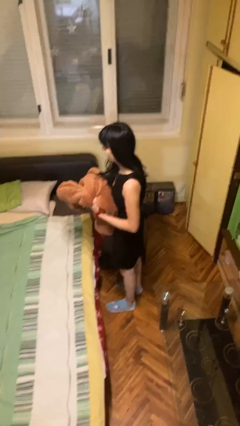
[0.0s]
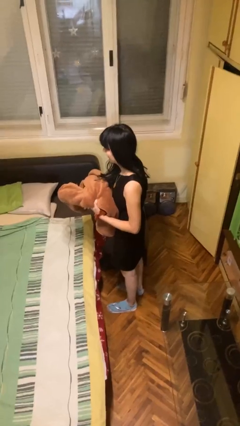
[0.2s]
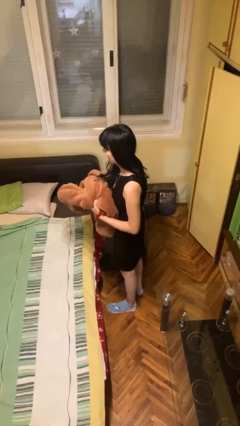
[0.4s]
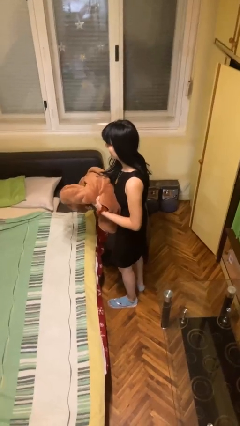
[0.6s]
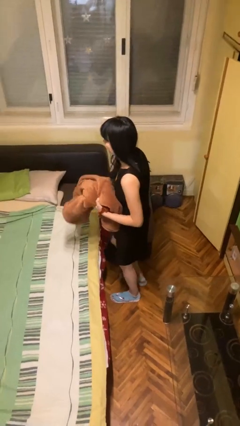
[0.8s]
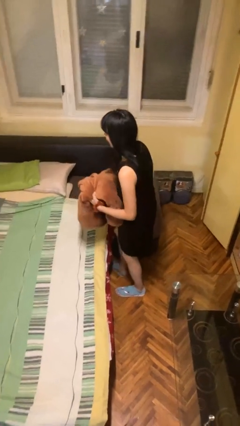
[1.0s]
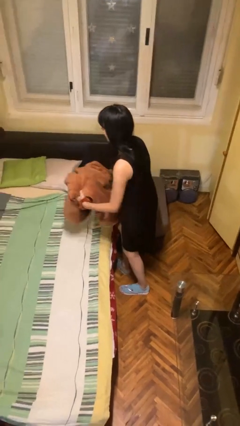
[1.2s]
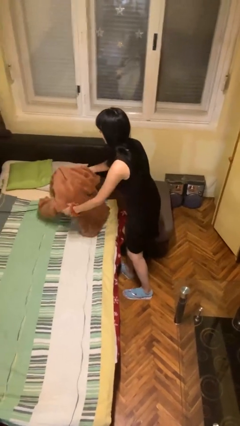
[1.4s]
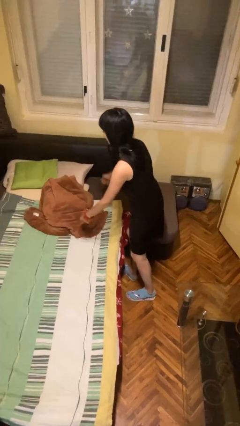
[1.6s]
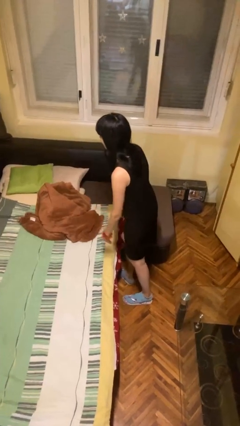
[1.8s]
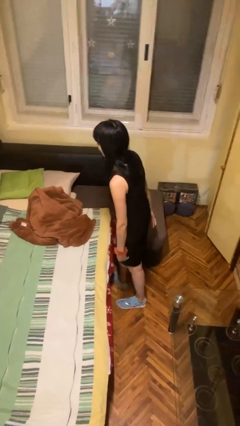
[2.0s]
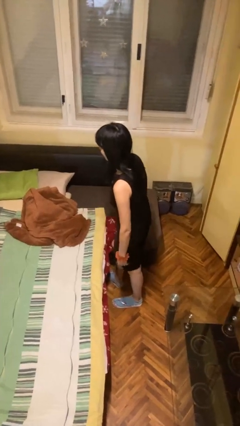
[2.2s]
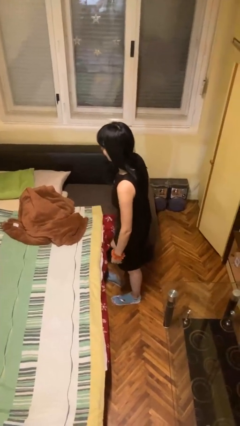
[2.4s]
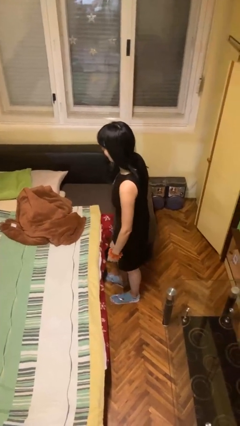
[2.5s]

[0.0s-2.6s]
person puts down object on bed

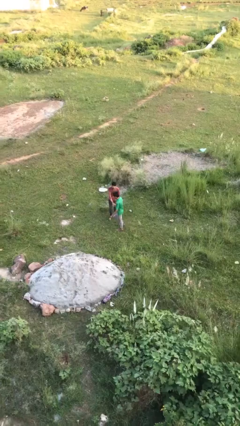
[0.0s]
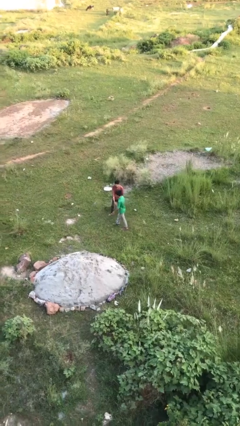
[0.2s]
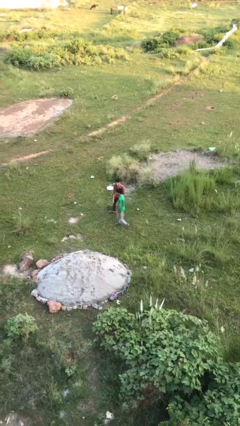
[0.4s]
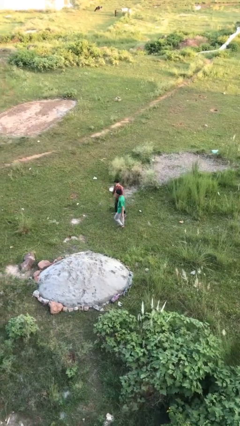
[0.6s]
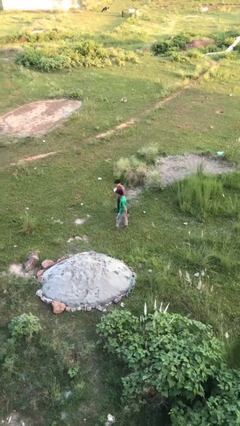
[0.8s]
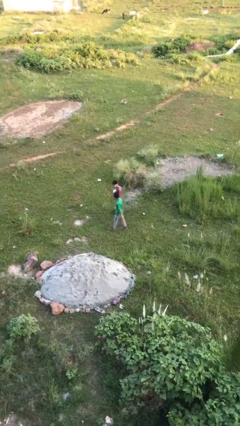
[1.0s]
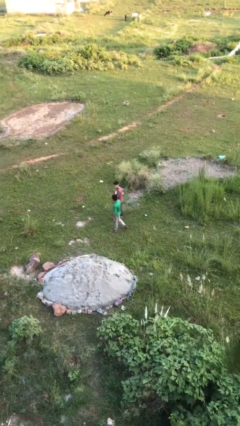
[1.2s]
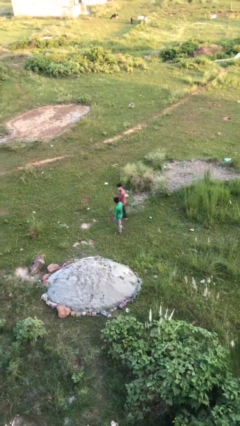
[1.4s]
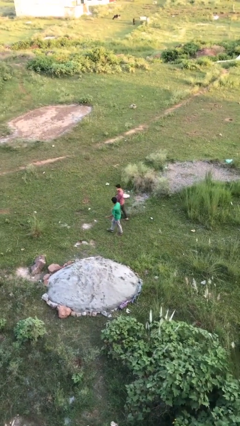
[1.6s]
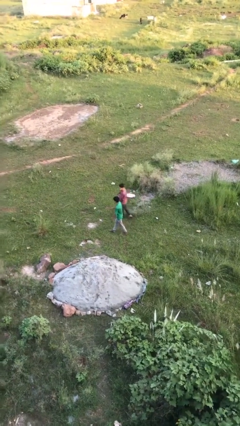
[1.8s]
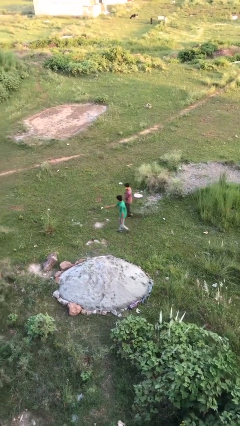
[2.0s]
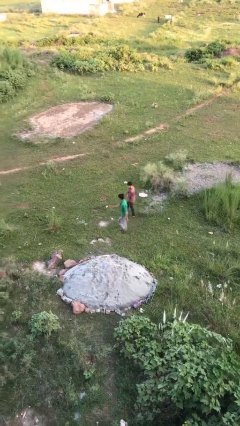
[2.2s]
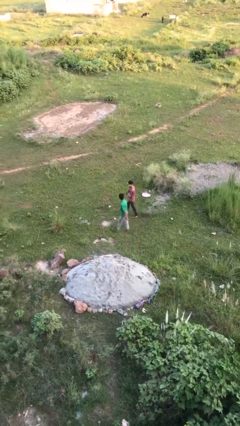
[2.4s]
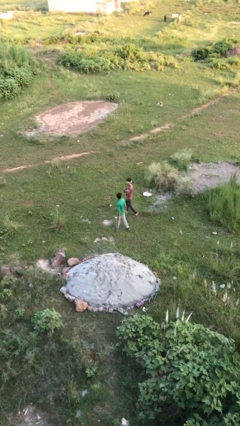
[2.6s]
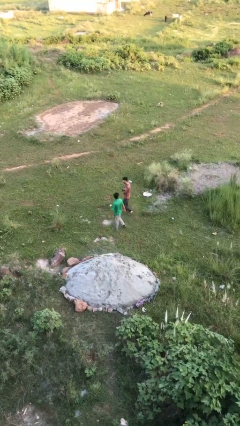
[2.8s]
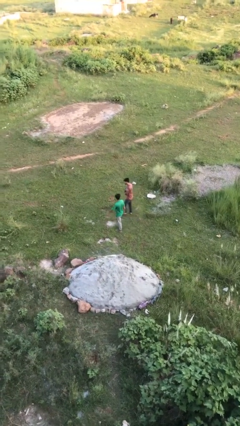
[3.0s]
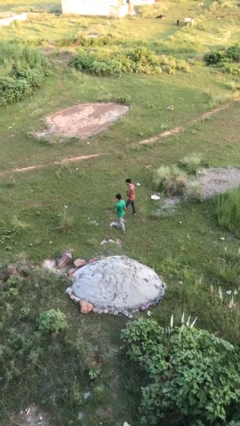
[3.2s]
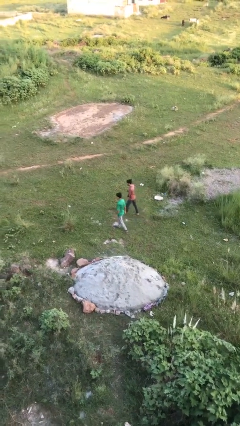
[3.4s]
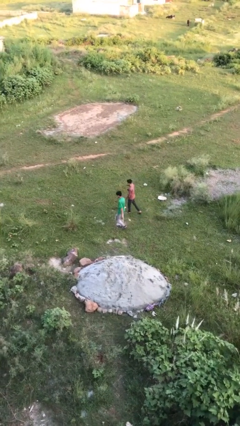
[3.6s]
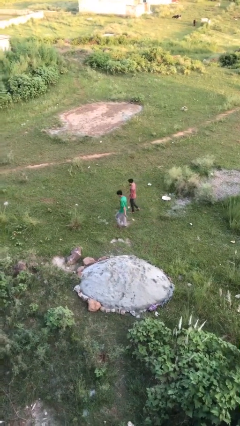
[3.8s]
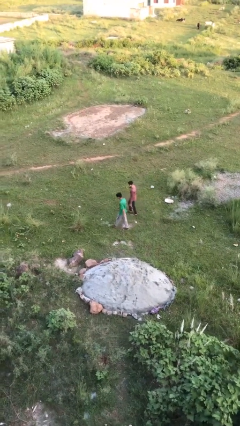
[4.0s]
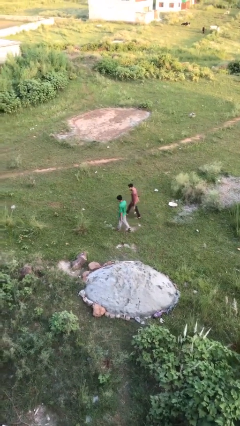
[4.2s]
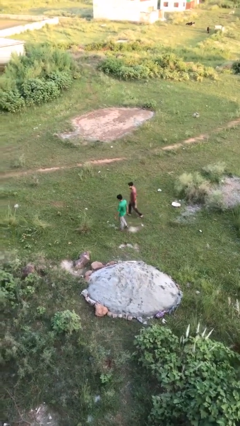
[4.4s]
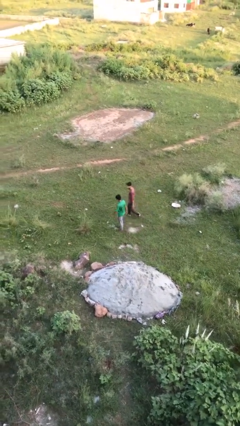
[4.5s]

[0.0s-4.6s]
person talks to person

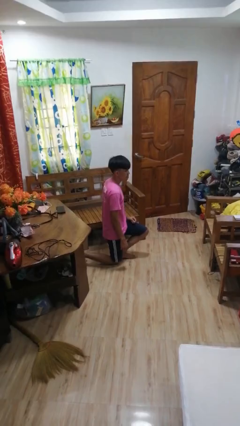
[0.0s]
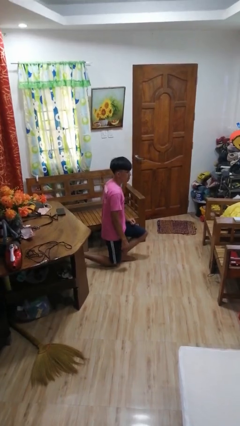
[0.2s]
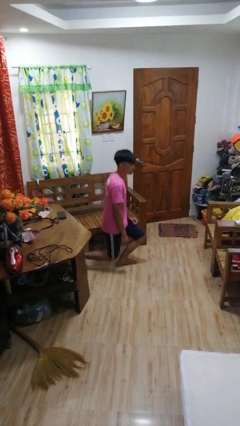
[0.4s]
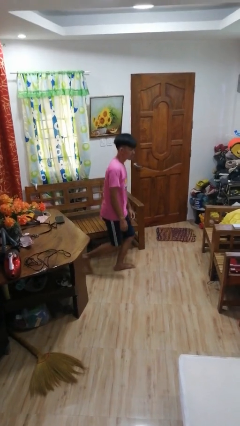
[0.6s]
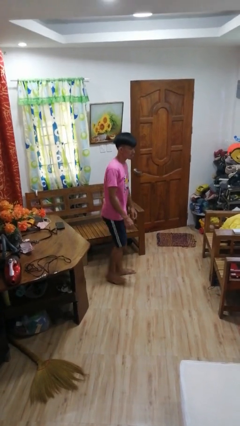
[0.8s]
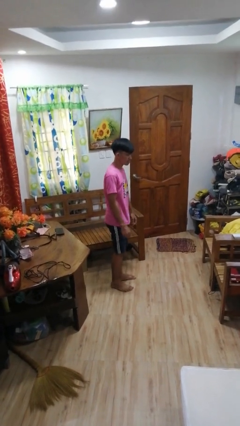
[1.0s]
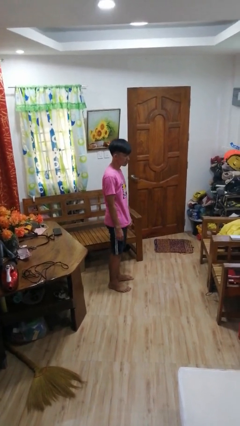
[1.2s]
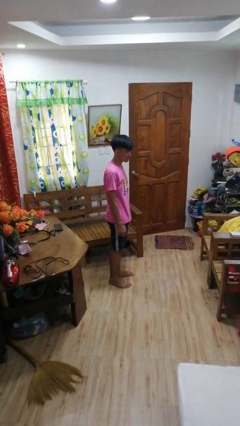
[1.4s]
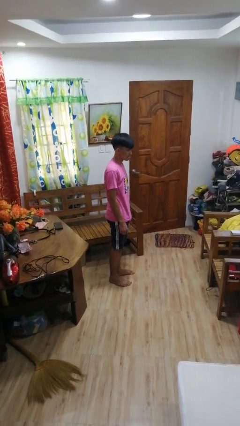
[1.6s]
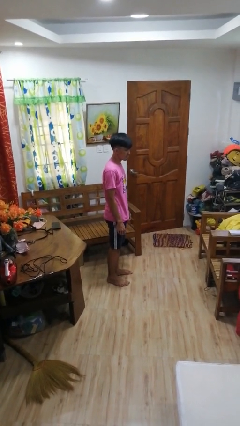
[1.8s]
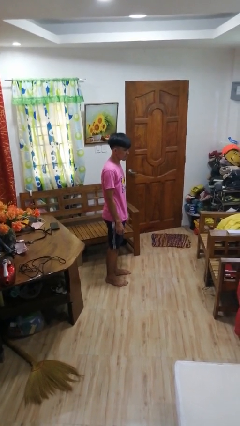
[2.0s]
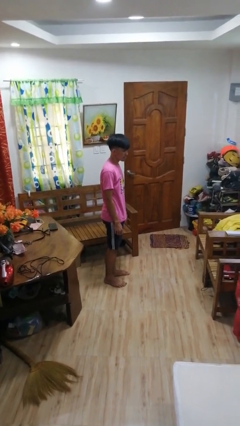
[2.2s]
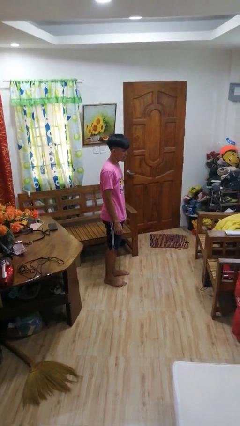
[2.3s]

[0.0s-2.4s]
person stands up from floor

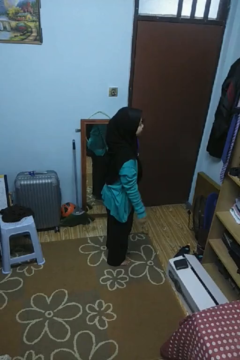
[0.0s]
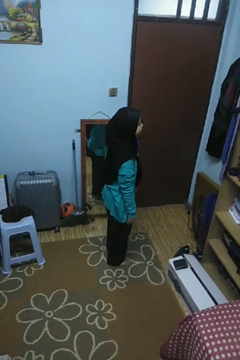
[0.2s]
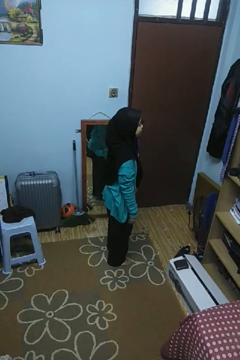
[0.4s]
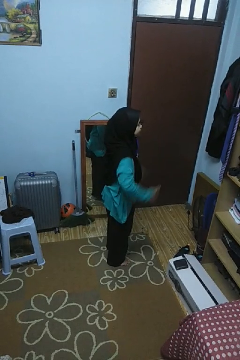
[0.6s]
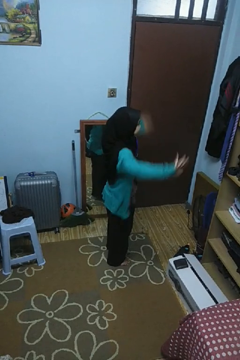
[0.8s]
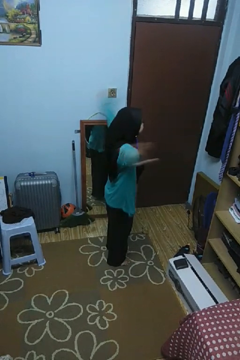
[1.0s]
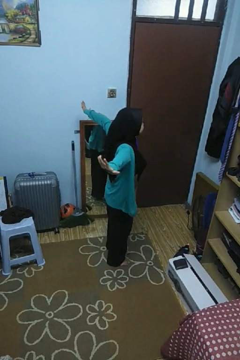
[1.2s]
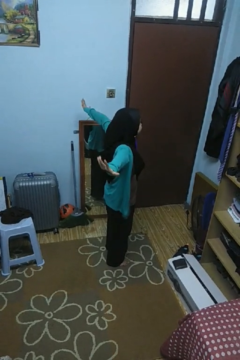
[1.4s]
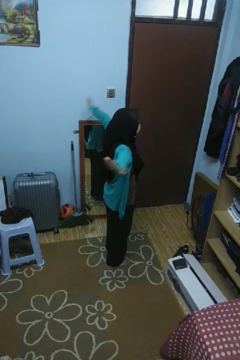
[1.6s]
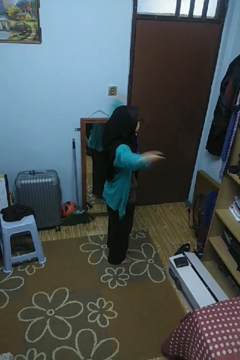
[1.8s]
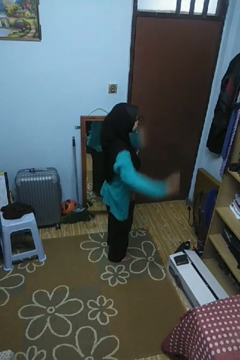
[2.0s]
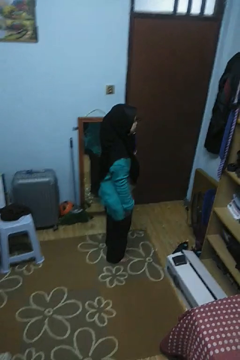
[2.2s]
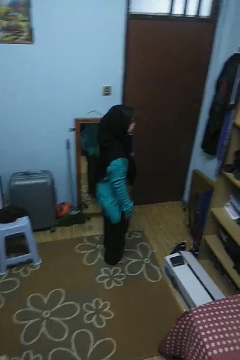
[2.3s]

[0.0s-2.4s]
person stretches arms to side

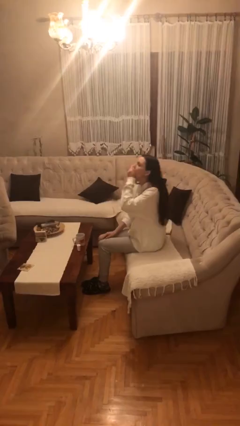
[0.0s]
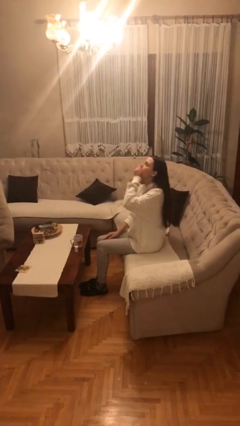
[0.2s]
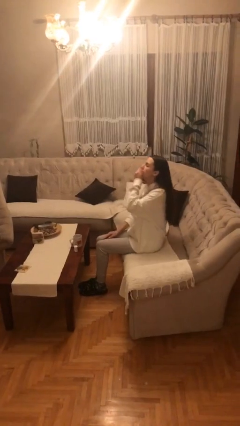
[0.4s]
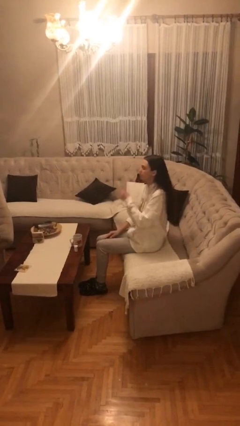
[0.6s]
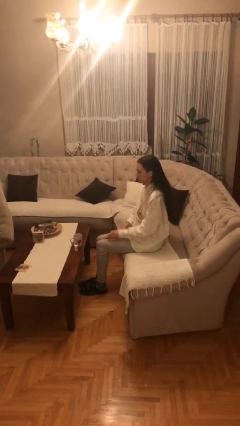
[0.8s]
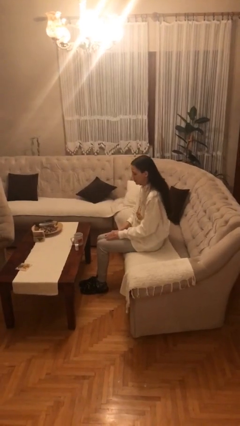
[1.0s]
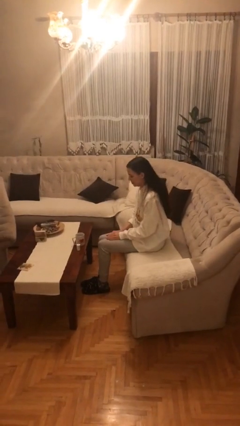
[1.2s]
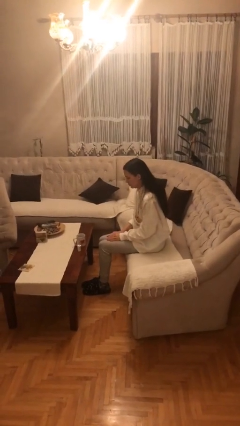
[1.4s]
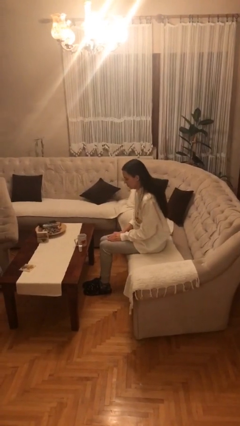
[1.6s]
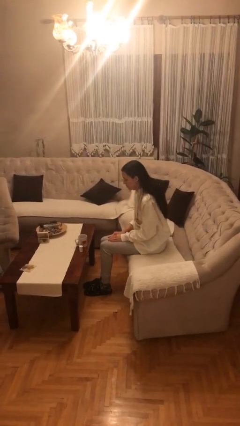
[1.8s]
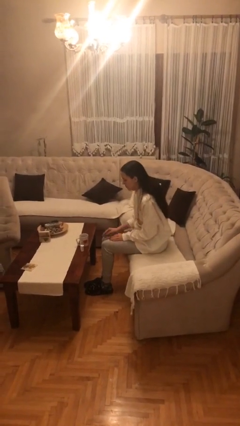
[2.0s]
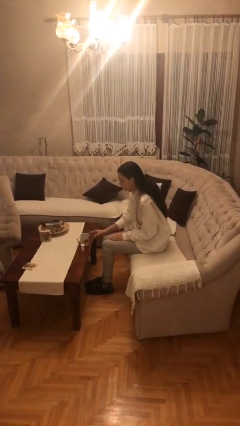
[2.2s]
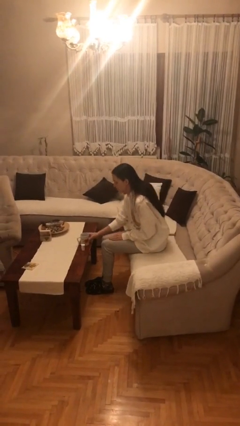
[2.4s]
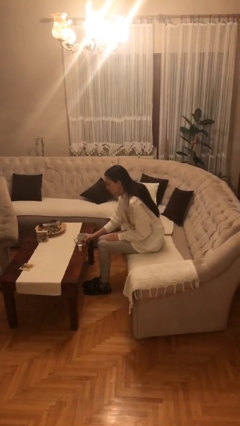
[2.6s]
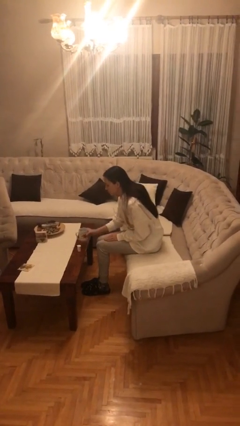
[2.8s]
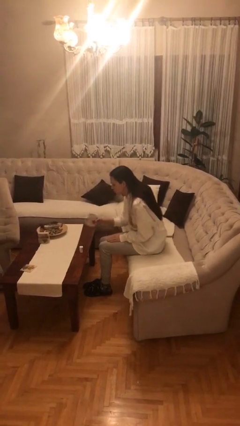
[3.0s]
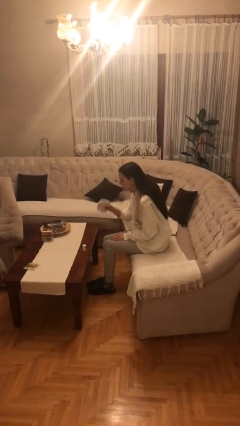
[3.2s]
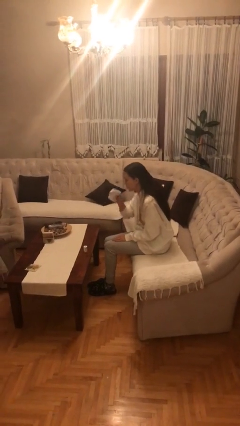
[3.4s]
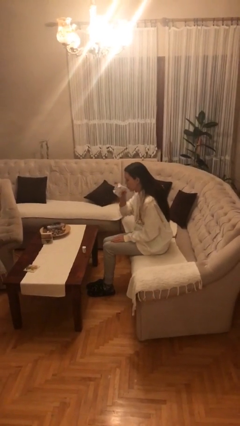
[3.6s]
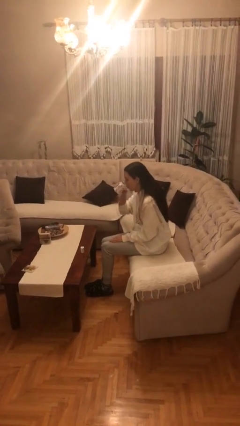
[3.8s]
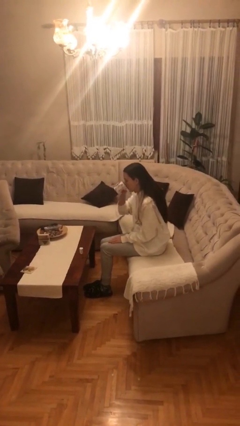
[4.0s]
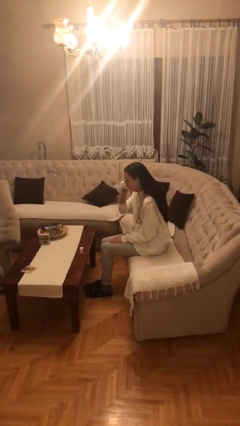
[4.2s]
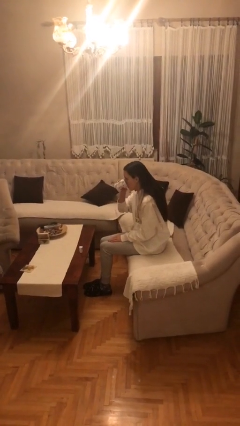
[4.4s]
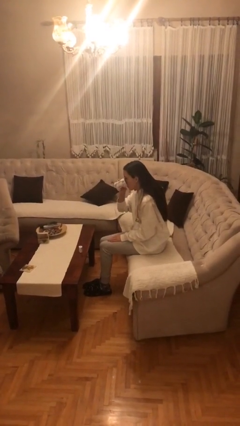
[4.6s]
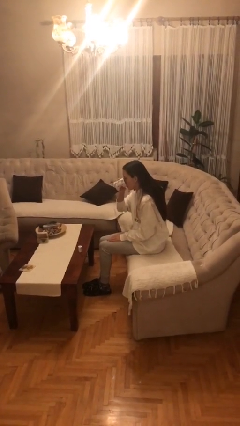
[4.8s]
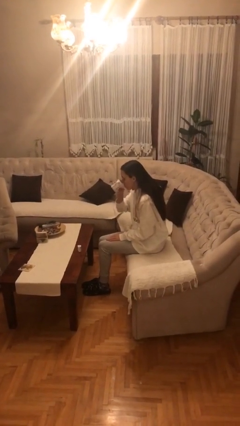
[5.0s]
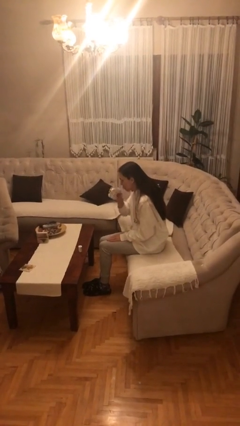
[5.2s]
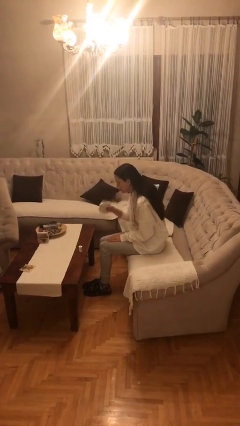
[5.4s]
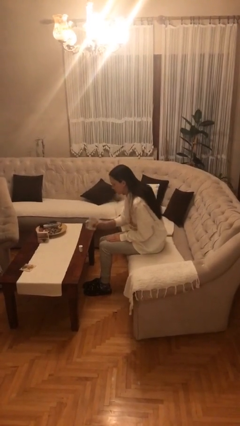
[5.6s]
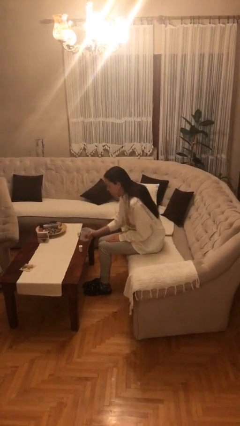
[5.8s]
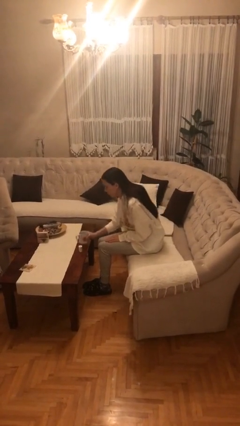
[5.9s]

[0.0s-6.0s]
person drinks from cup
